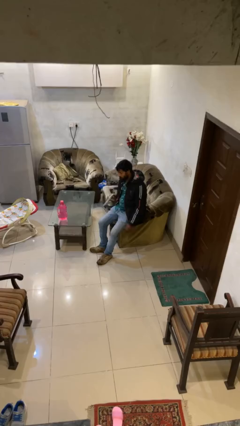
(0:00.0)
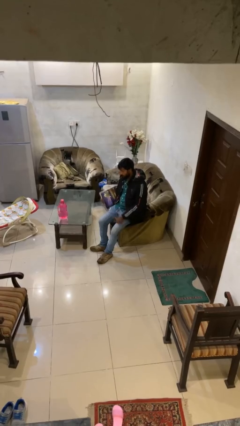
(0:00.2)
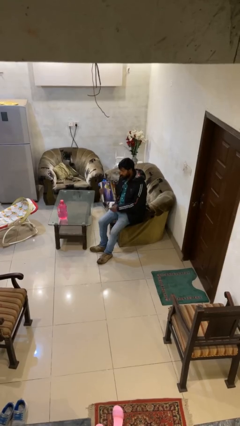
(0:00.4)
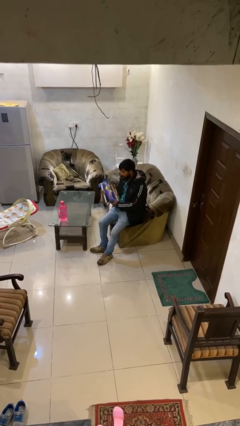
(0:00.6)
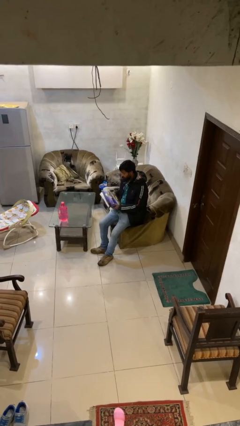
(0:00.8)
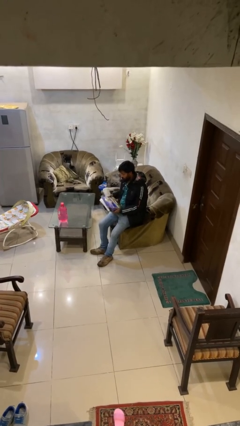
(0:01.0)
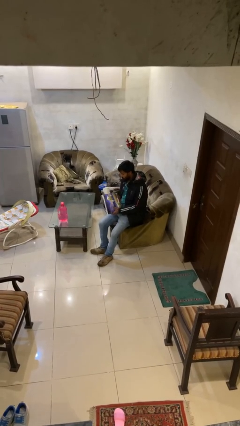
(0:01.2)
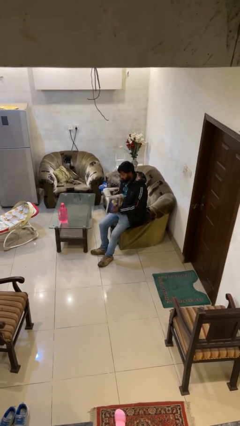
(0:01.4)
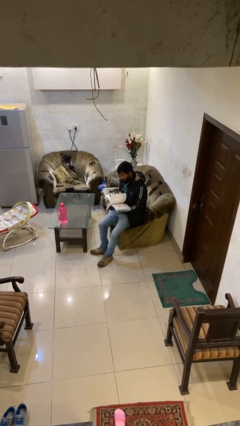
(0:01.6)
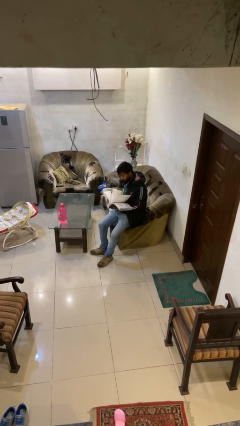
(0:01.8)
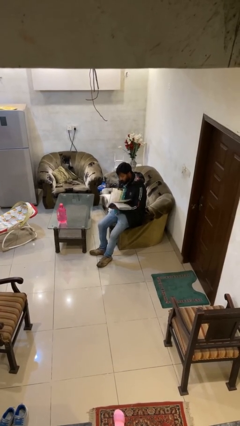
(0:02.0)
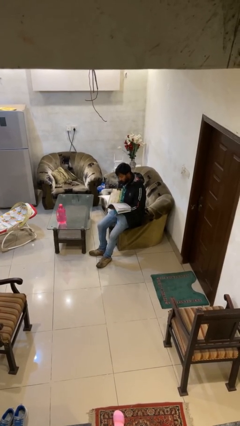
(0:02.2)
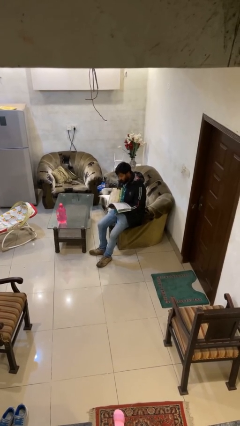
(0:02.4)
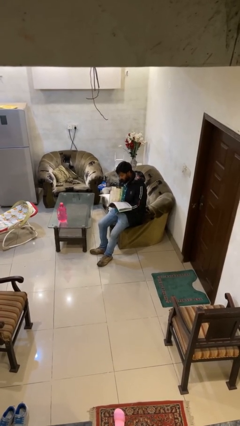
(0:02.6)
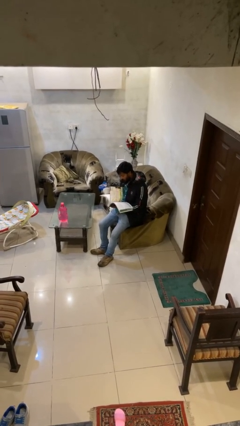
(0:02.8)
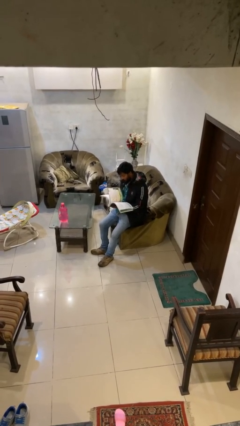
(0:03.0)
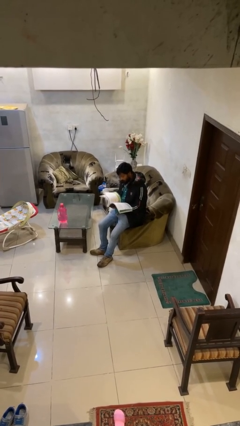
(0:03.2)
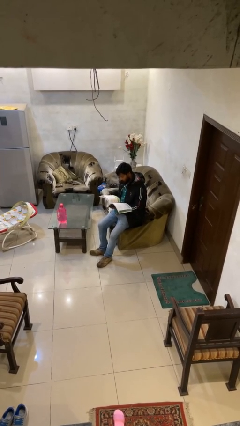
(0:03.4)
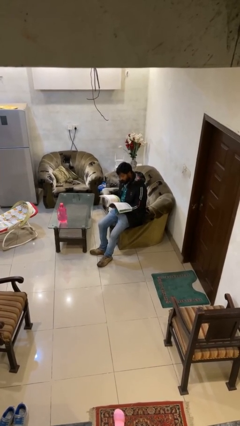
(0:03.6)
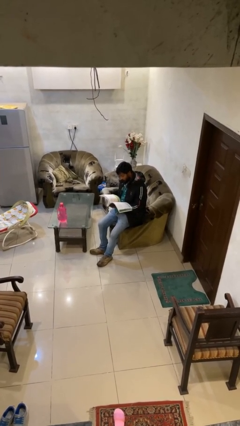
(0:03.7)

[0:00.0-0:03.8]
person reads document

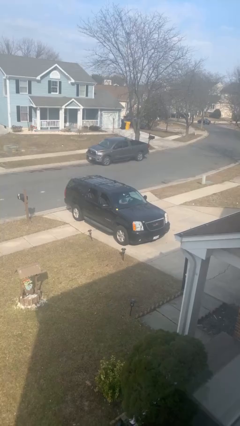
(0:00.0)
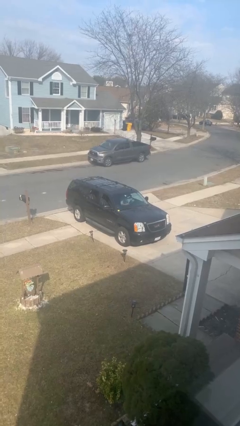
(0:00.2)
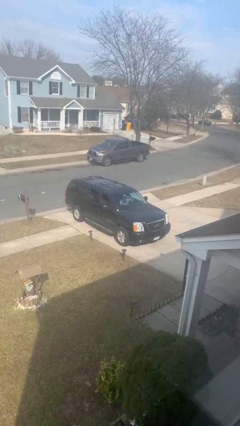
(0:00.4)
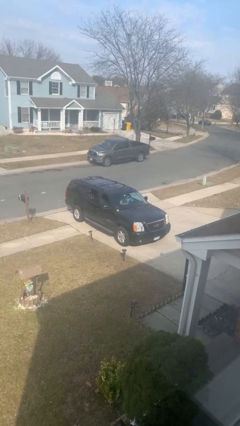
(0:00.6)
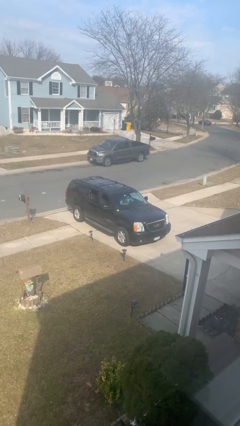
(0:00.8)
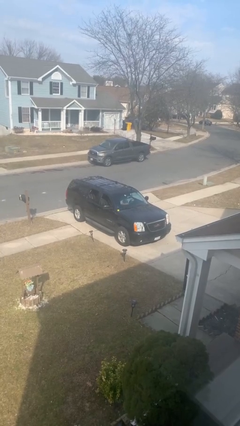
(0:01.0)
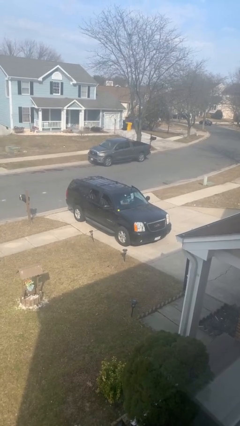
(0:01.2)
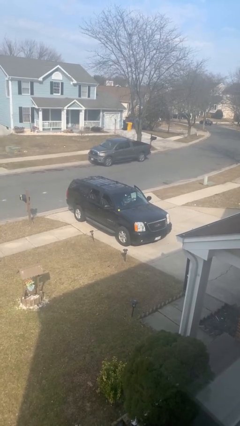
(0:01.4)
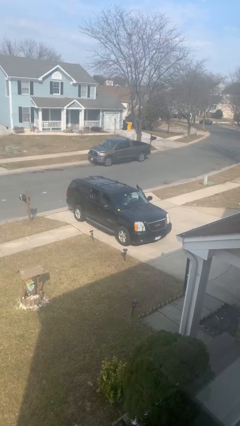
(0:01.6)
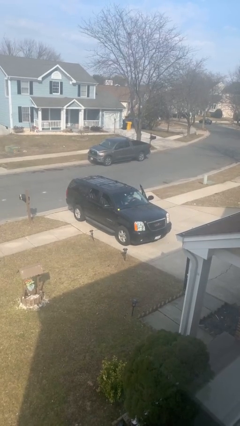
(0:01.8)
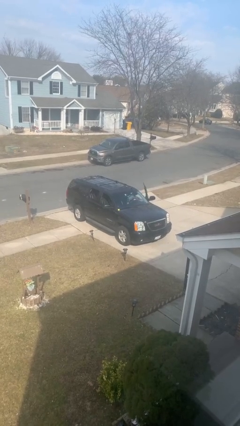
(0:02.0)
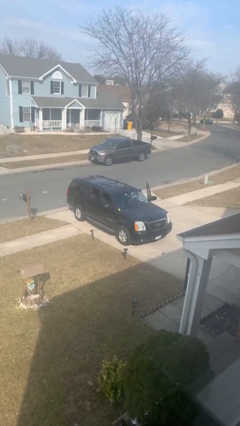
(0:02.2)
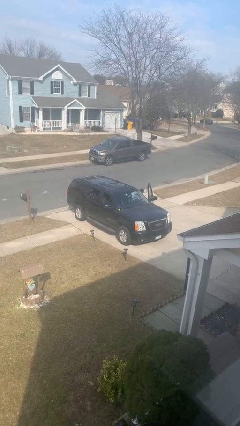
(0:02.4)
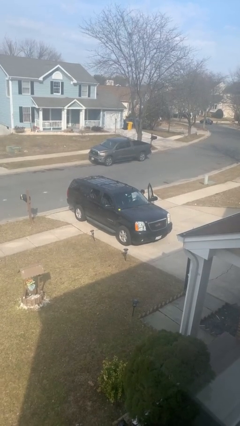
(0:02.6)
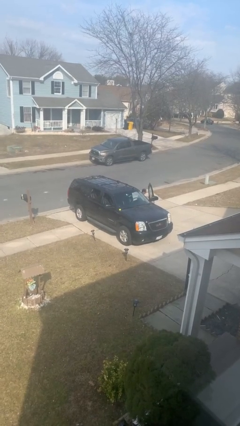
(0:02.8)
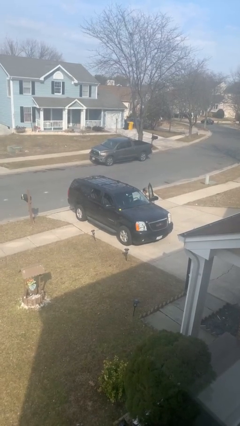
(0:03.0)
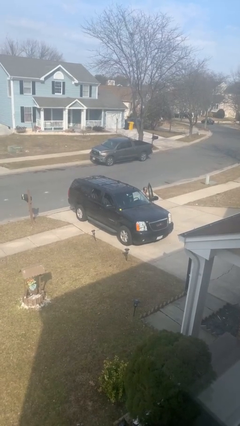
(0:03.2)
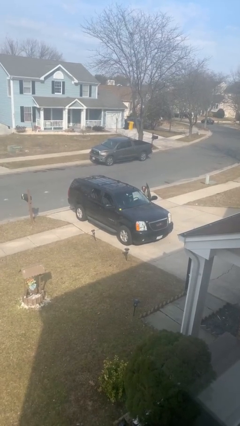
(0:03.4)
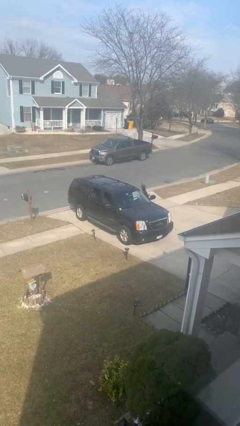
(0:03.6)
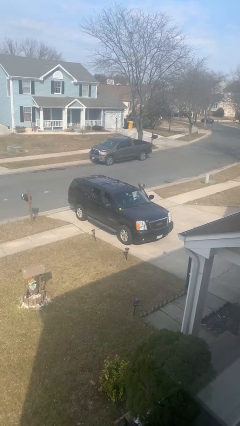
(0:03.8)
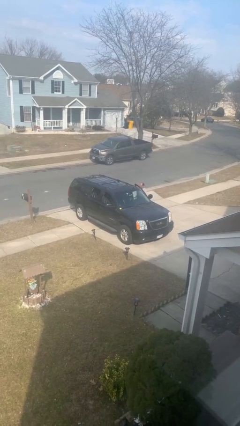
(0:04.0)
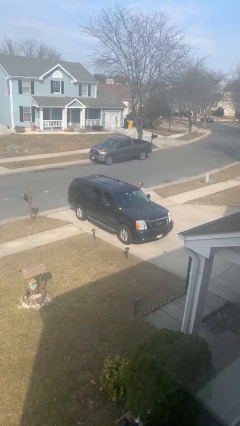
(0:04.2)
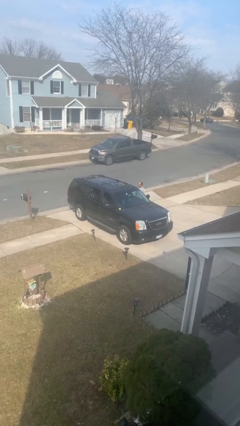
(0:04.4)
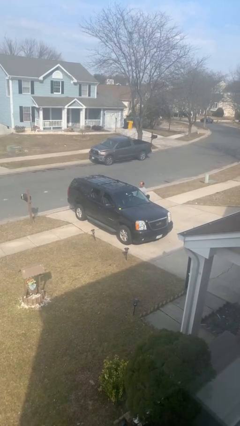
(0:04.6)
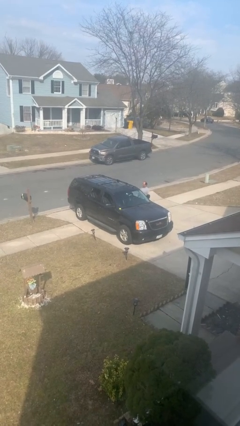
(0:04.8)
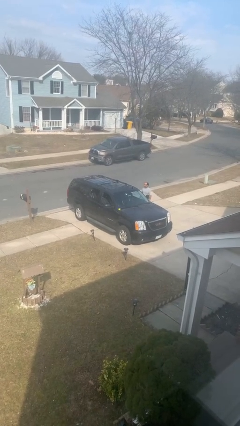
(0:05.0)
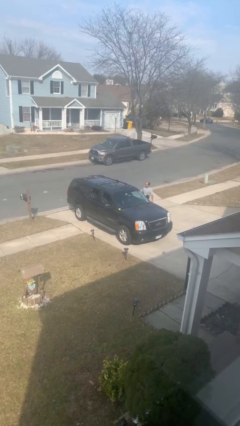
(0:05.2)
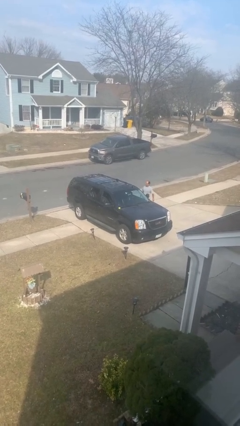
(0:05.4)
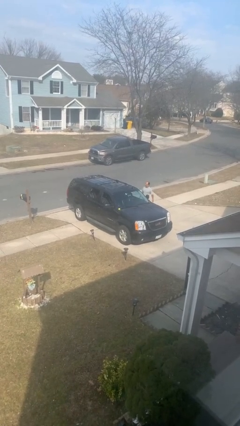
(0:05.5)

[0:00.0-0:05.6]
car drops off person

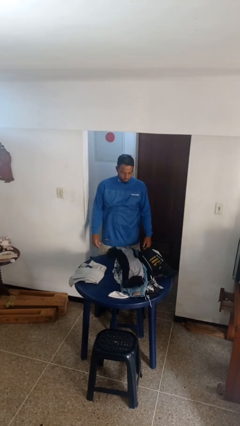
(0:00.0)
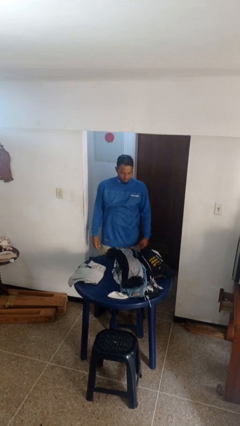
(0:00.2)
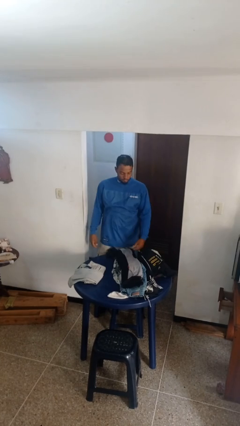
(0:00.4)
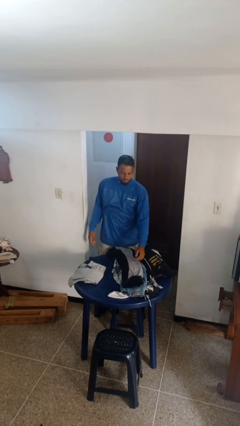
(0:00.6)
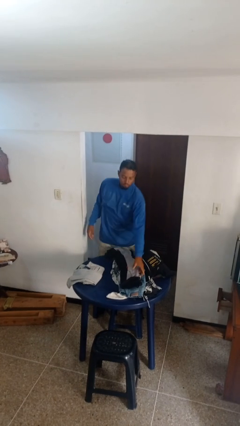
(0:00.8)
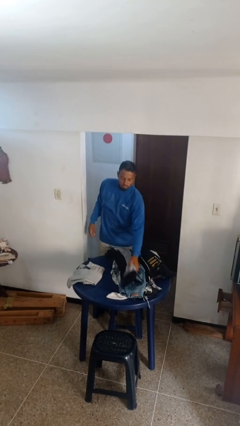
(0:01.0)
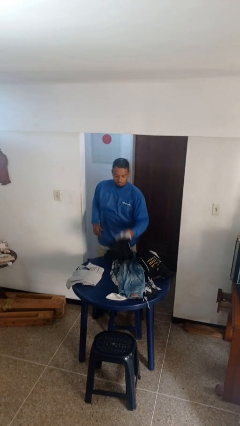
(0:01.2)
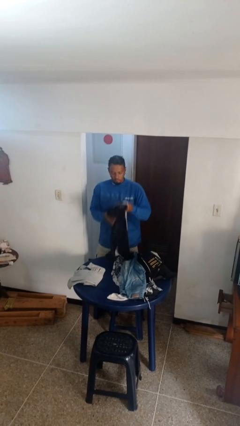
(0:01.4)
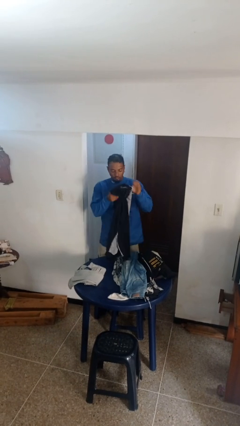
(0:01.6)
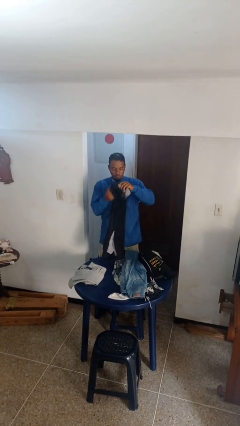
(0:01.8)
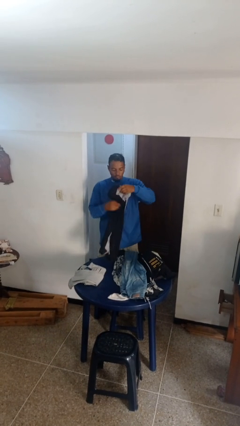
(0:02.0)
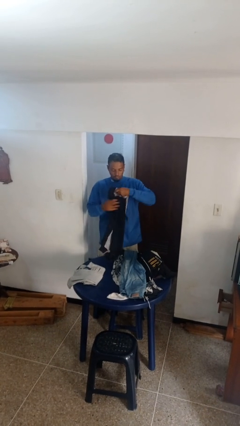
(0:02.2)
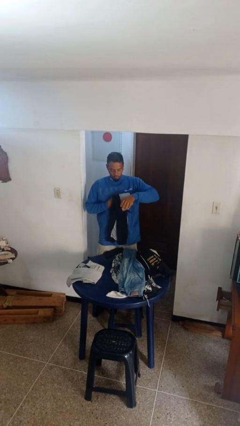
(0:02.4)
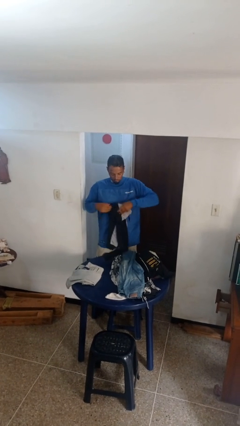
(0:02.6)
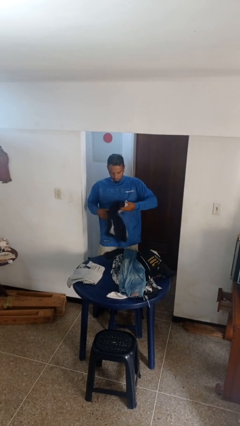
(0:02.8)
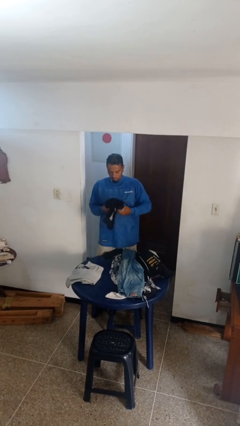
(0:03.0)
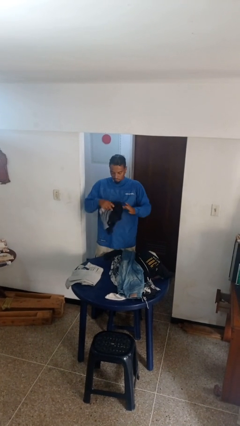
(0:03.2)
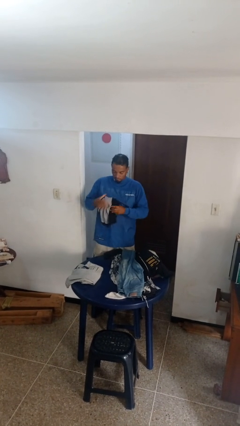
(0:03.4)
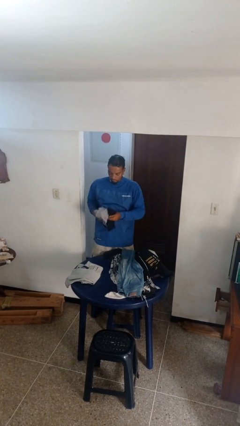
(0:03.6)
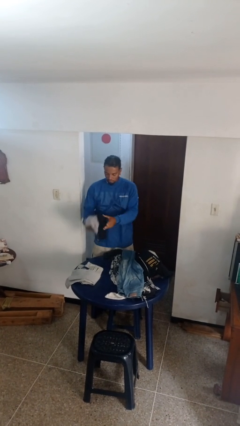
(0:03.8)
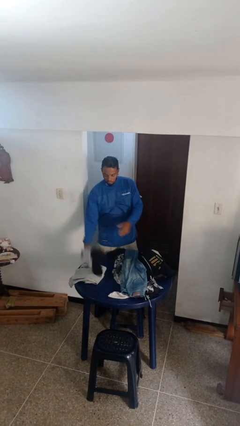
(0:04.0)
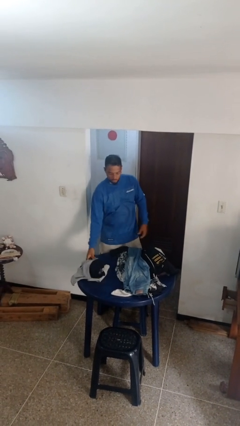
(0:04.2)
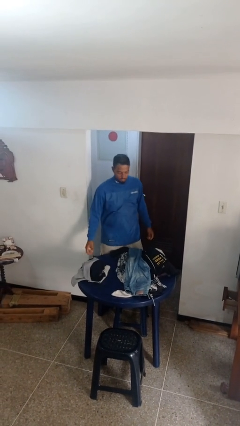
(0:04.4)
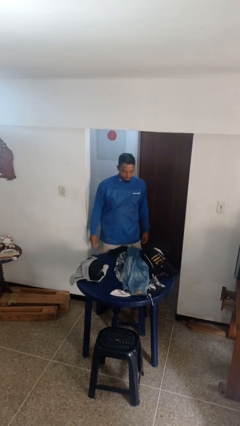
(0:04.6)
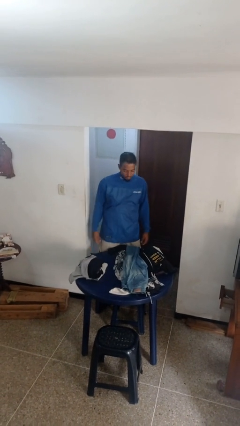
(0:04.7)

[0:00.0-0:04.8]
person folds pants

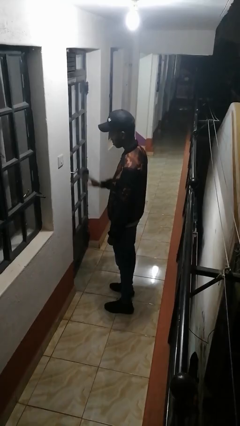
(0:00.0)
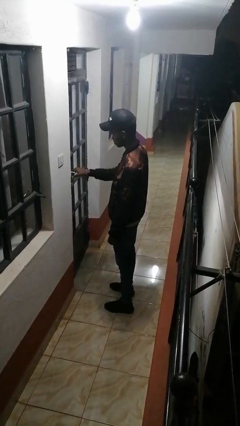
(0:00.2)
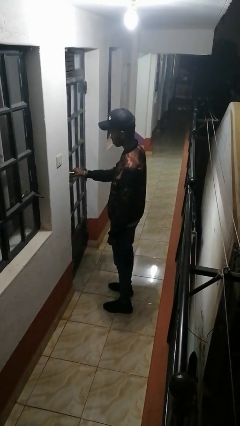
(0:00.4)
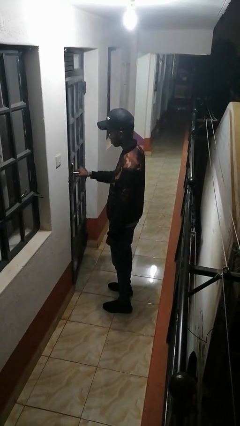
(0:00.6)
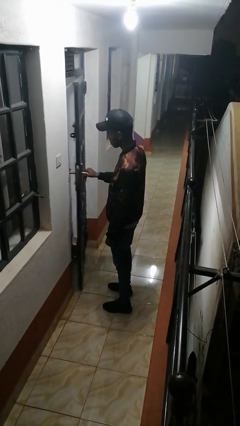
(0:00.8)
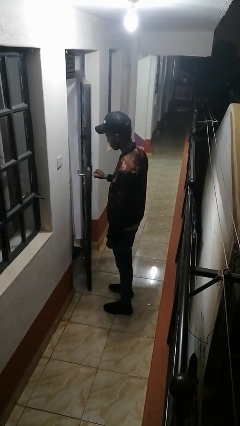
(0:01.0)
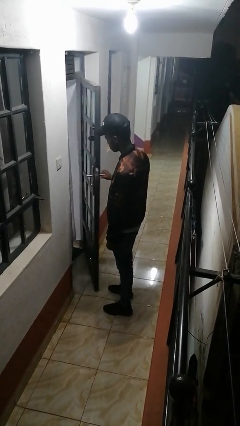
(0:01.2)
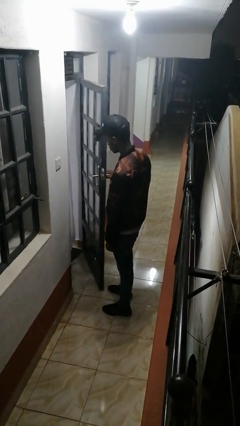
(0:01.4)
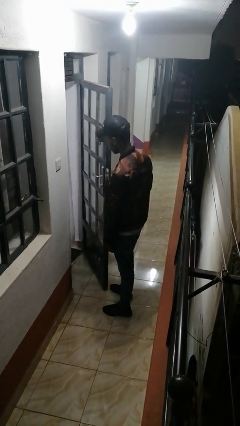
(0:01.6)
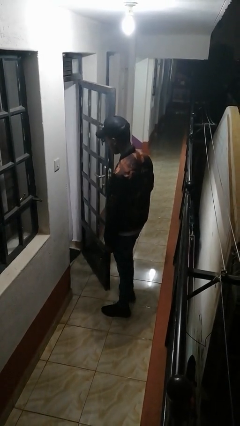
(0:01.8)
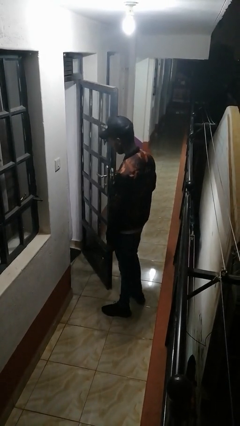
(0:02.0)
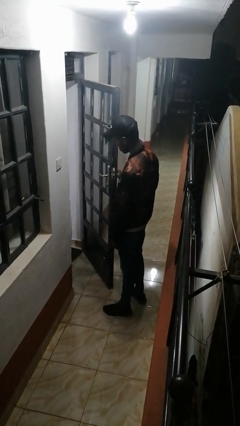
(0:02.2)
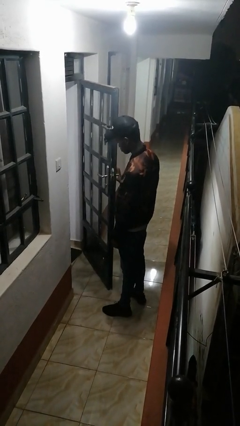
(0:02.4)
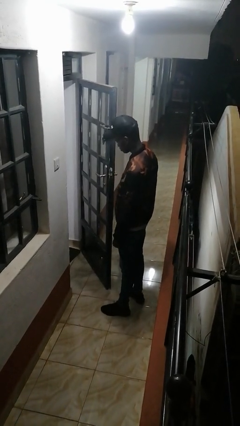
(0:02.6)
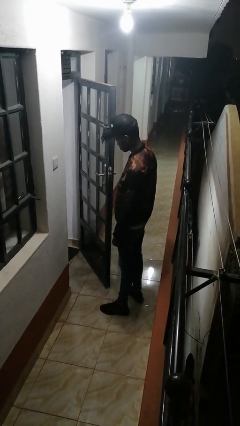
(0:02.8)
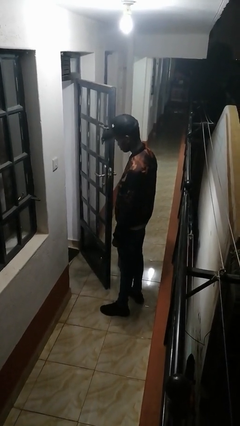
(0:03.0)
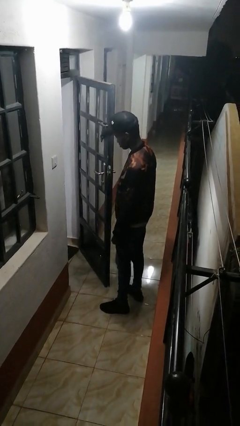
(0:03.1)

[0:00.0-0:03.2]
person opens facility door

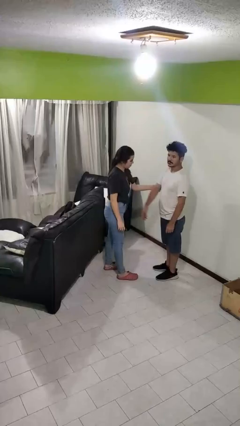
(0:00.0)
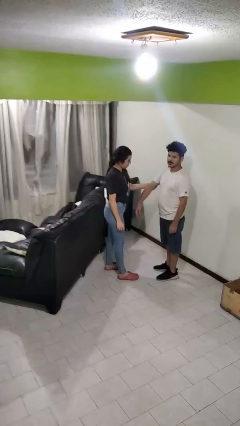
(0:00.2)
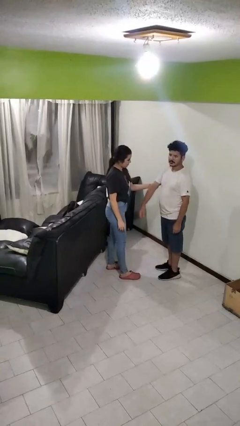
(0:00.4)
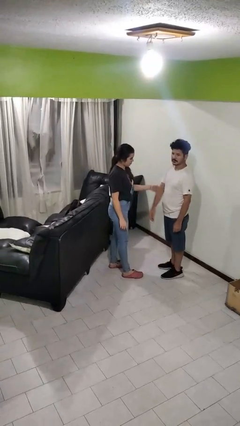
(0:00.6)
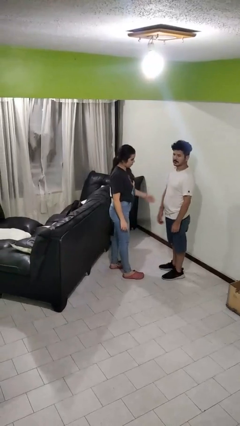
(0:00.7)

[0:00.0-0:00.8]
person grabs person by bicep
